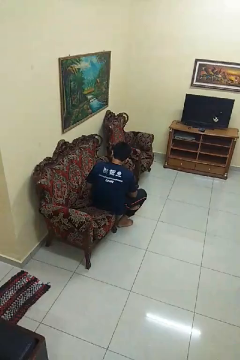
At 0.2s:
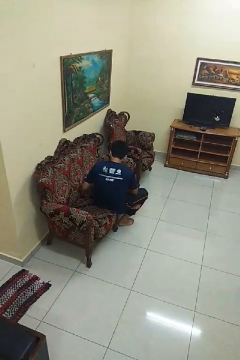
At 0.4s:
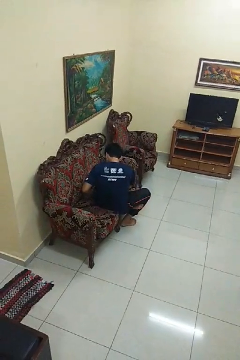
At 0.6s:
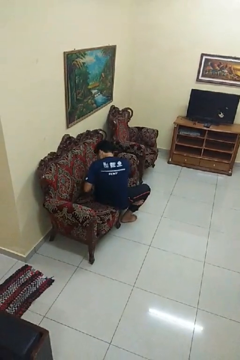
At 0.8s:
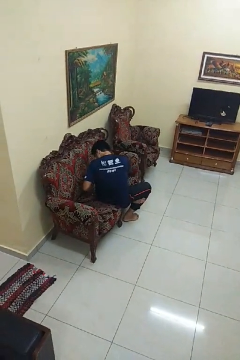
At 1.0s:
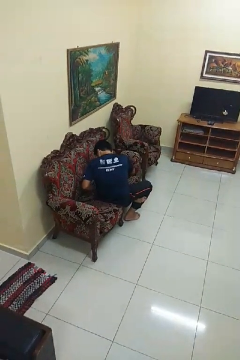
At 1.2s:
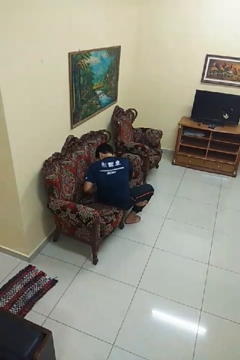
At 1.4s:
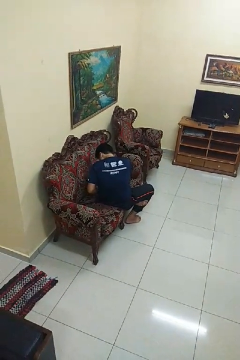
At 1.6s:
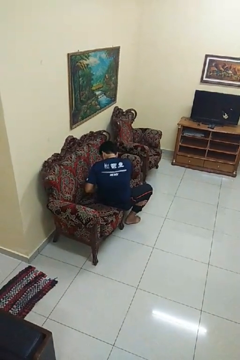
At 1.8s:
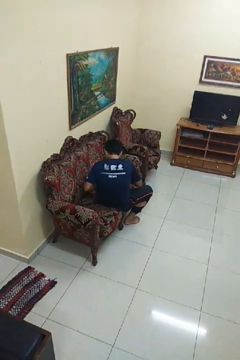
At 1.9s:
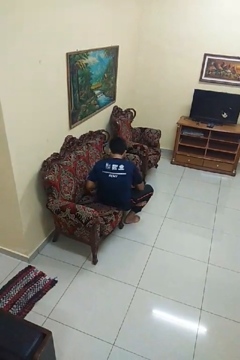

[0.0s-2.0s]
person searches in couch

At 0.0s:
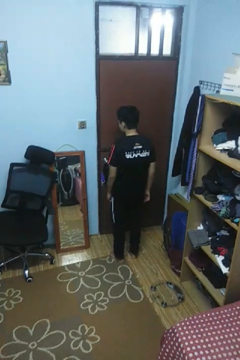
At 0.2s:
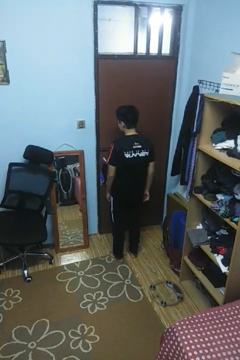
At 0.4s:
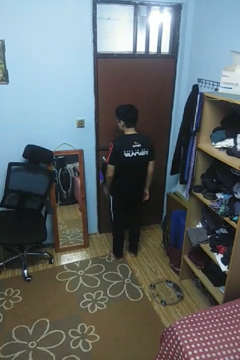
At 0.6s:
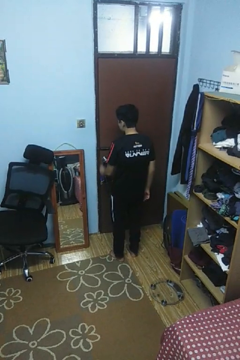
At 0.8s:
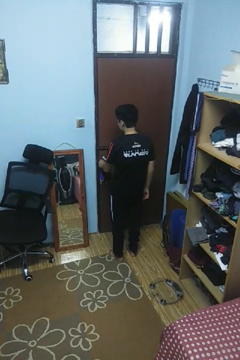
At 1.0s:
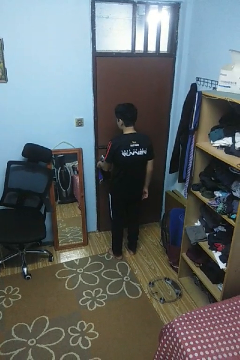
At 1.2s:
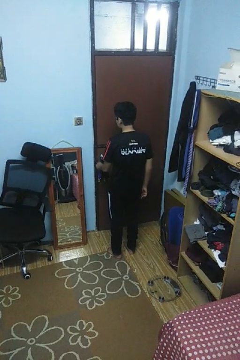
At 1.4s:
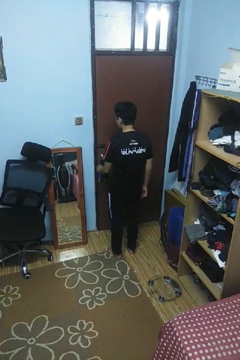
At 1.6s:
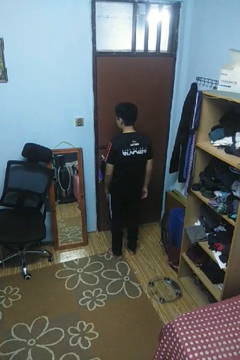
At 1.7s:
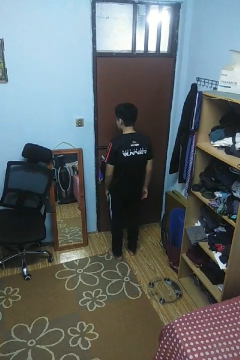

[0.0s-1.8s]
person unlocks door with keys

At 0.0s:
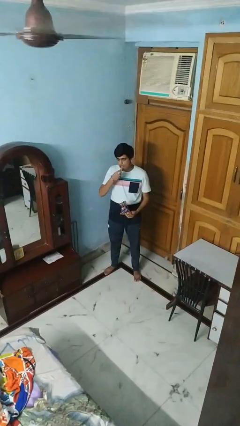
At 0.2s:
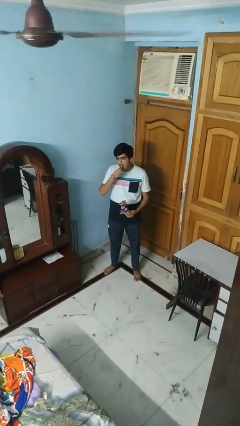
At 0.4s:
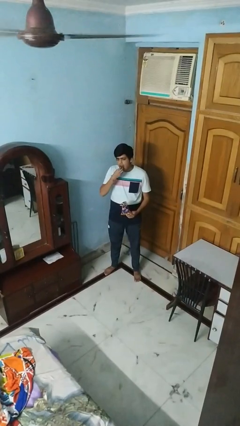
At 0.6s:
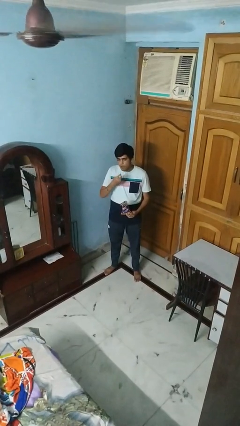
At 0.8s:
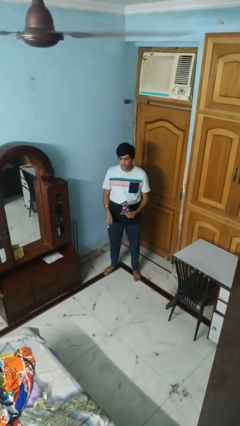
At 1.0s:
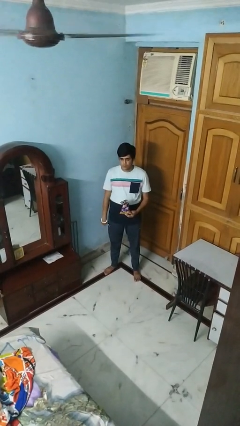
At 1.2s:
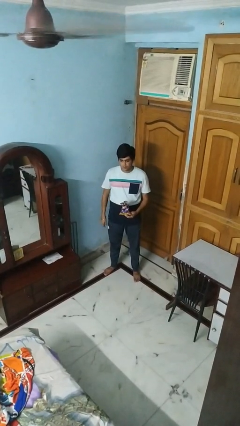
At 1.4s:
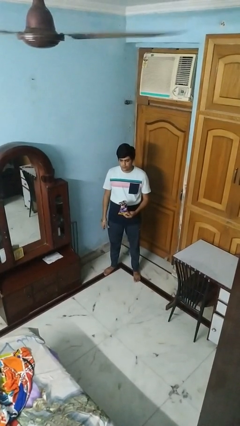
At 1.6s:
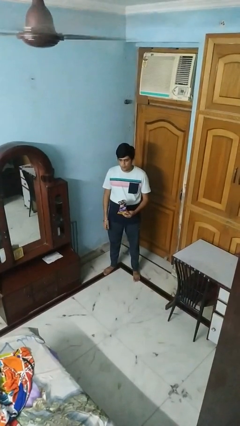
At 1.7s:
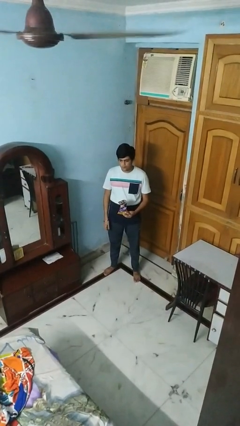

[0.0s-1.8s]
person eats snack from bag

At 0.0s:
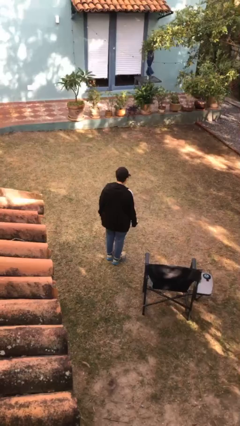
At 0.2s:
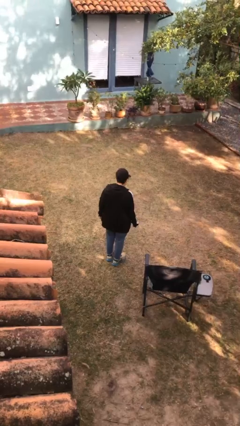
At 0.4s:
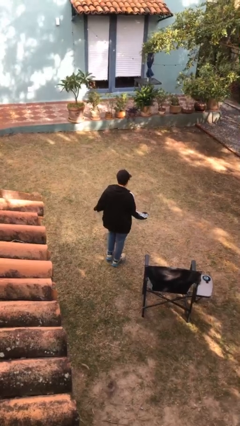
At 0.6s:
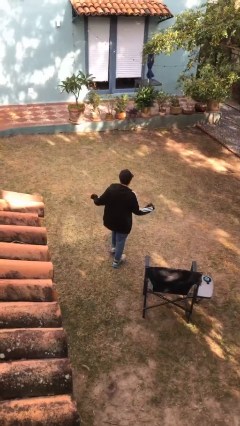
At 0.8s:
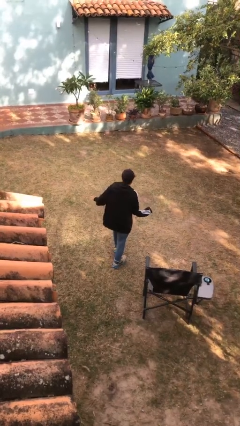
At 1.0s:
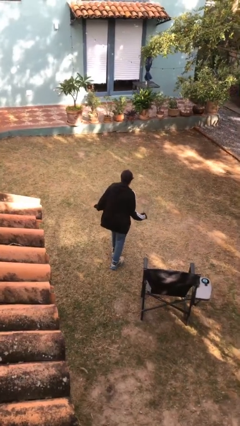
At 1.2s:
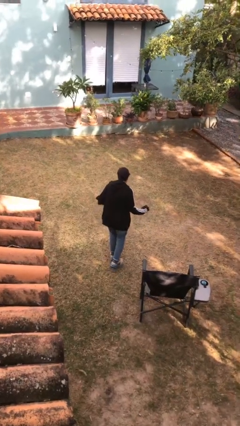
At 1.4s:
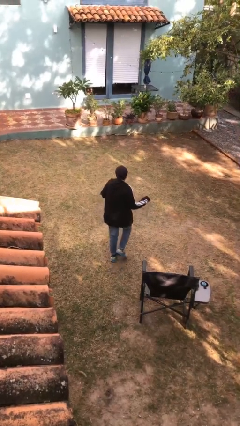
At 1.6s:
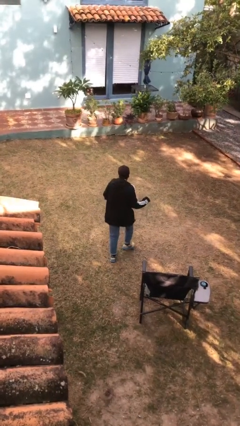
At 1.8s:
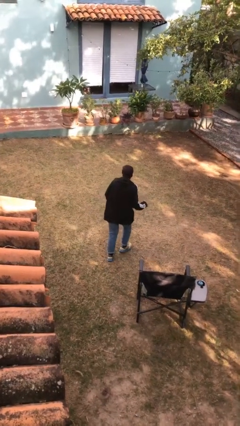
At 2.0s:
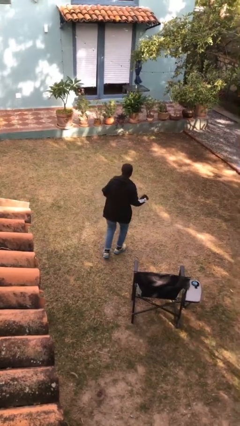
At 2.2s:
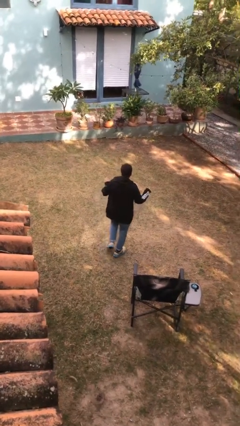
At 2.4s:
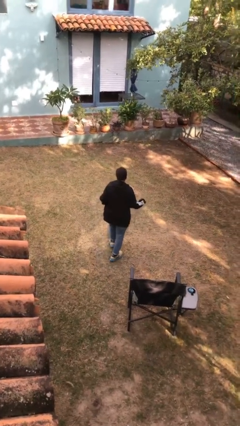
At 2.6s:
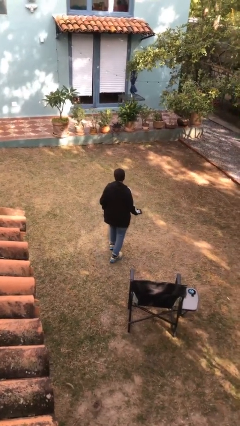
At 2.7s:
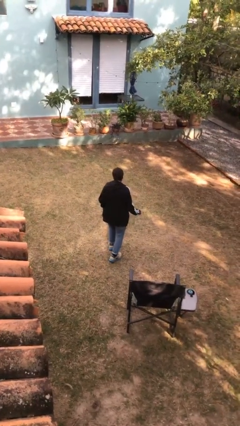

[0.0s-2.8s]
person walks tiptoe

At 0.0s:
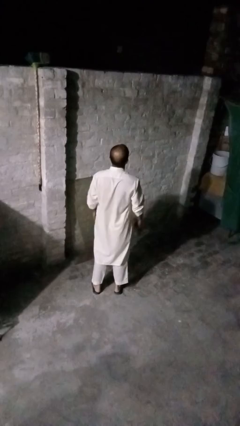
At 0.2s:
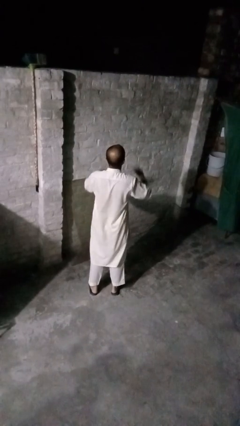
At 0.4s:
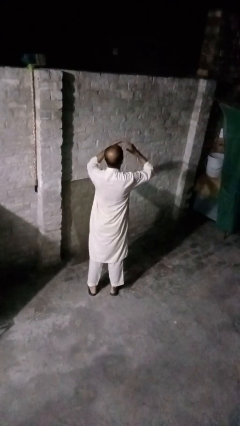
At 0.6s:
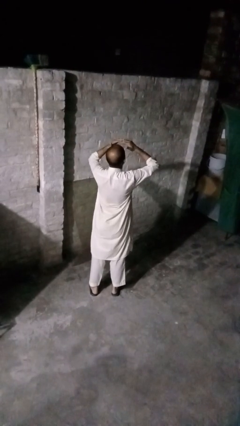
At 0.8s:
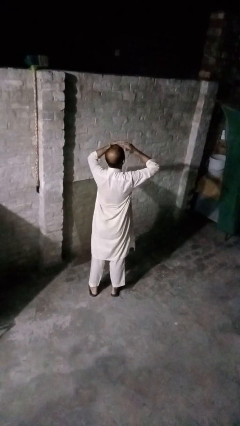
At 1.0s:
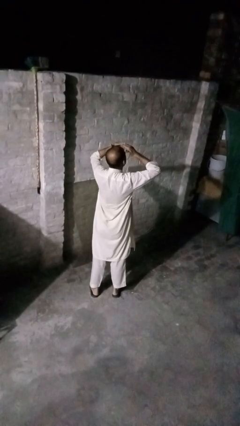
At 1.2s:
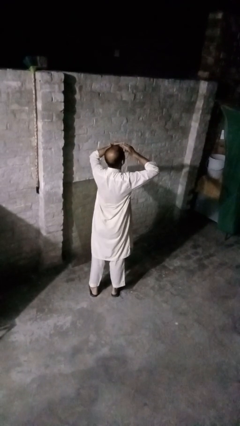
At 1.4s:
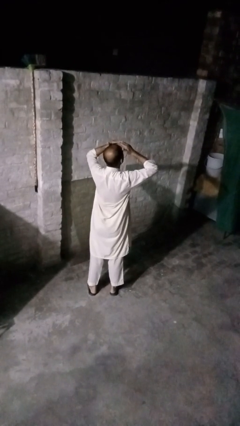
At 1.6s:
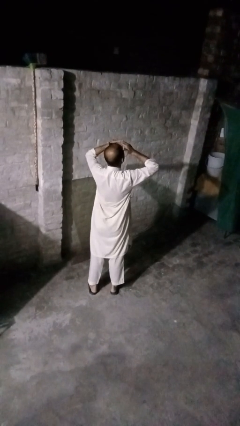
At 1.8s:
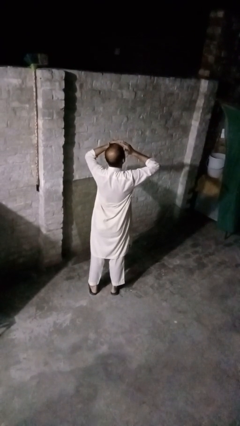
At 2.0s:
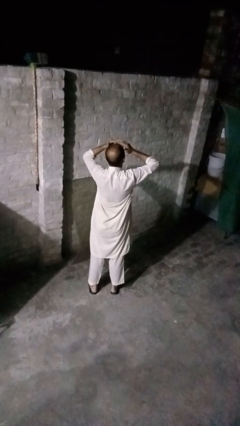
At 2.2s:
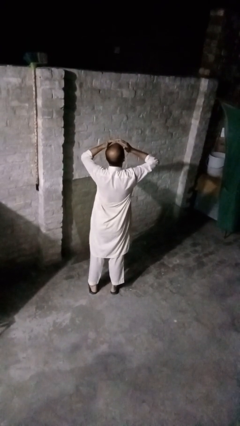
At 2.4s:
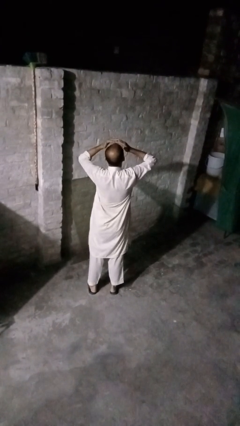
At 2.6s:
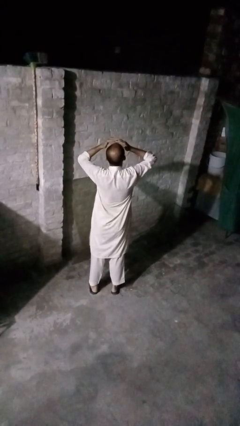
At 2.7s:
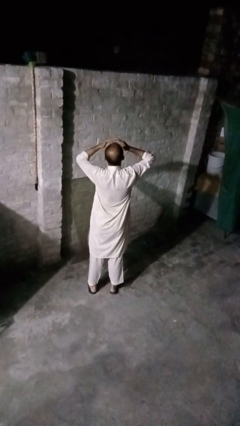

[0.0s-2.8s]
person shades eyes

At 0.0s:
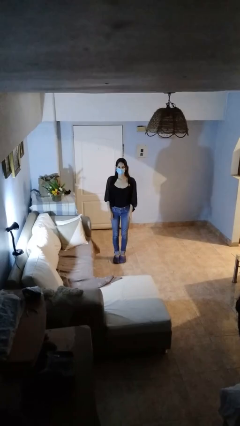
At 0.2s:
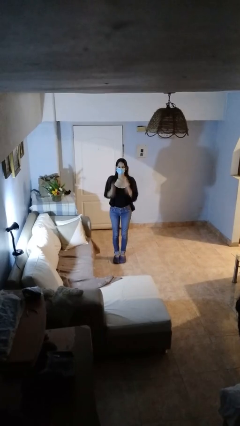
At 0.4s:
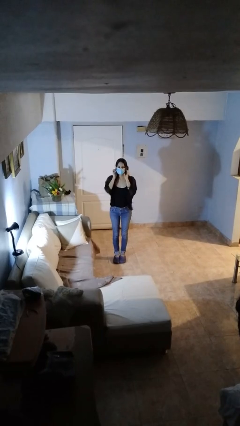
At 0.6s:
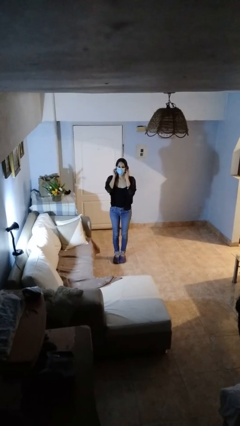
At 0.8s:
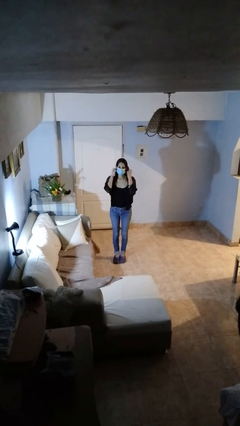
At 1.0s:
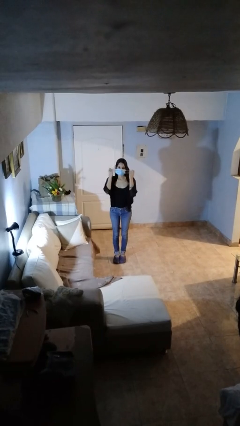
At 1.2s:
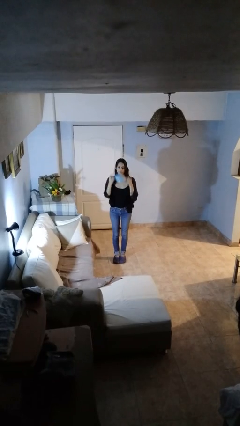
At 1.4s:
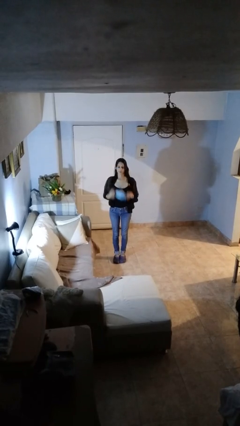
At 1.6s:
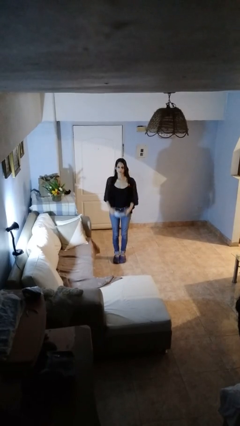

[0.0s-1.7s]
person takes off facemask

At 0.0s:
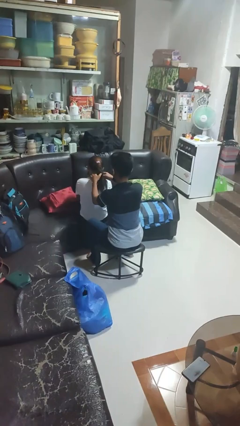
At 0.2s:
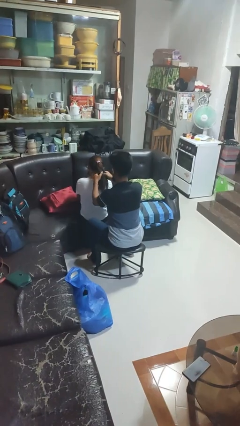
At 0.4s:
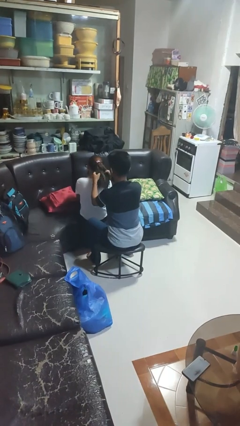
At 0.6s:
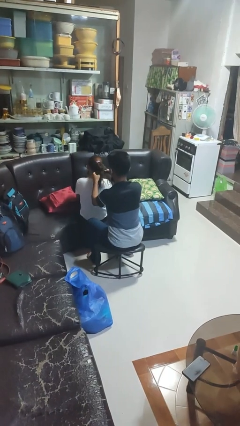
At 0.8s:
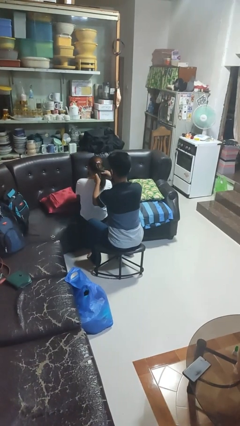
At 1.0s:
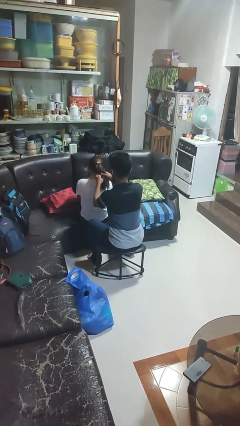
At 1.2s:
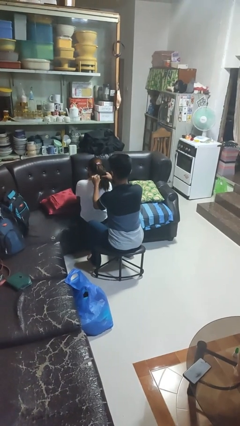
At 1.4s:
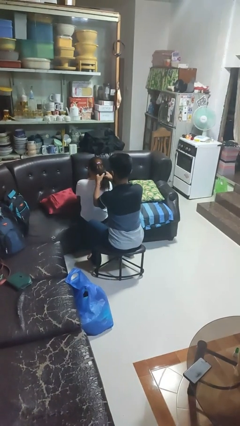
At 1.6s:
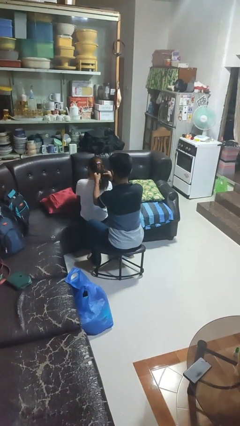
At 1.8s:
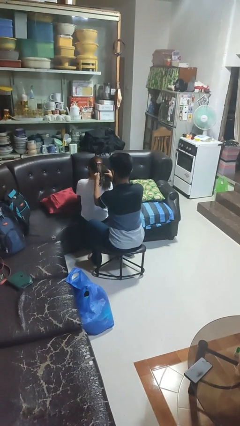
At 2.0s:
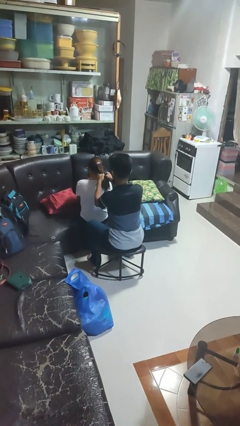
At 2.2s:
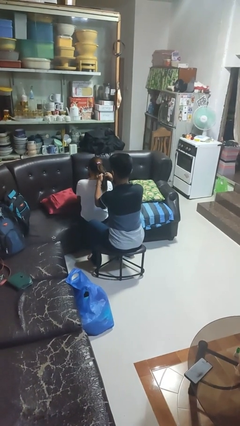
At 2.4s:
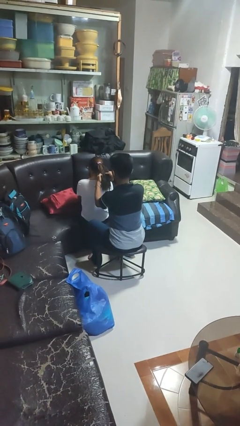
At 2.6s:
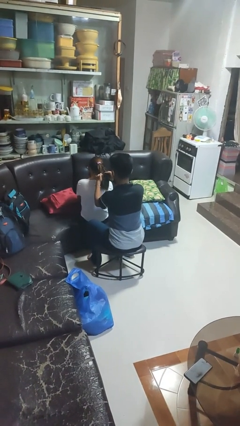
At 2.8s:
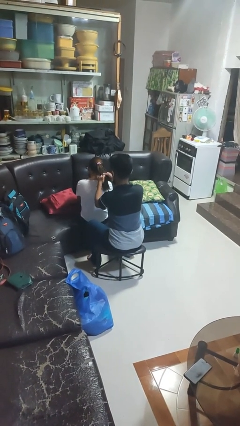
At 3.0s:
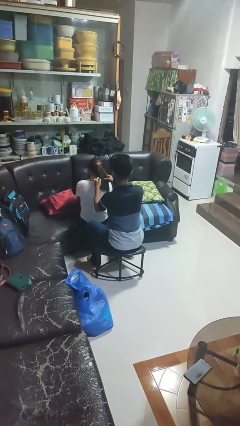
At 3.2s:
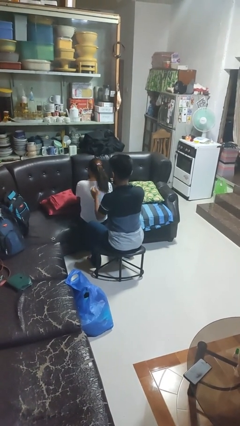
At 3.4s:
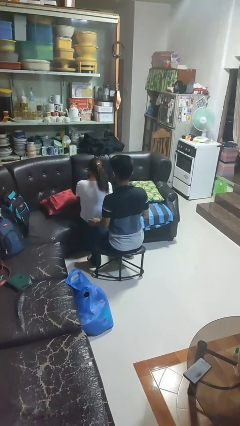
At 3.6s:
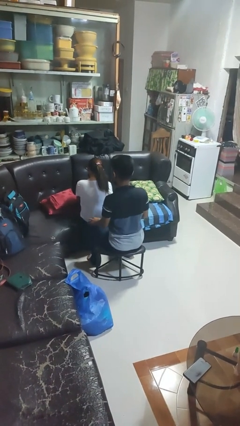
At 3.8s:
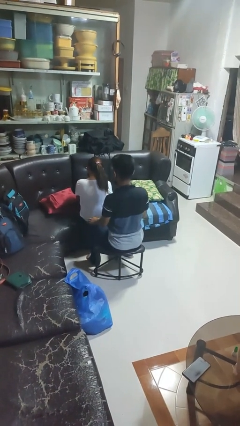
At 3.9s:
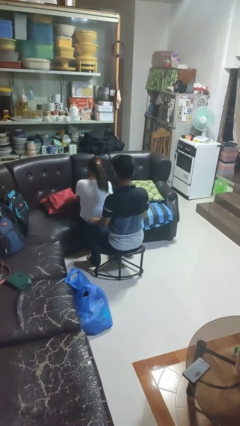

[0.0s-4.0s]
person braids hair of person

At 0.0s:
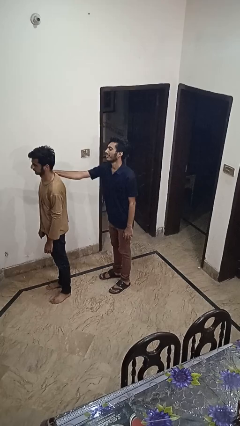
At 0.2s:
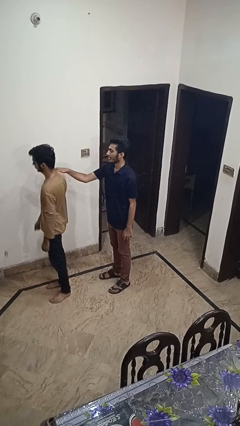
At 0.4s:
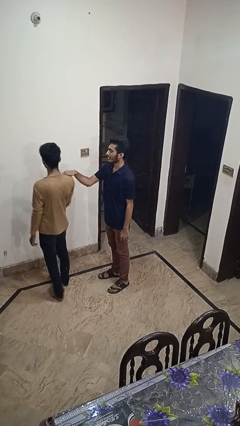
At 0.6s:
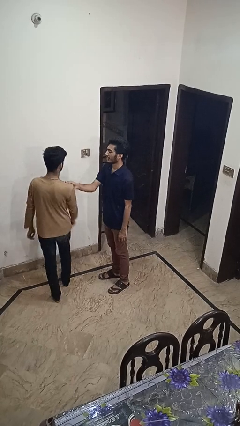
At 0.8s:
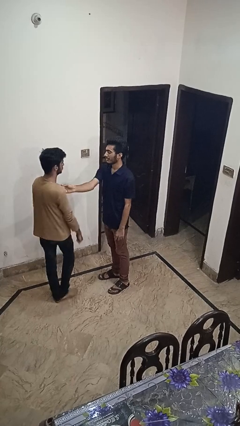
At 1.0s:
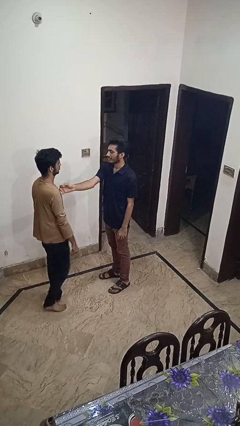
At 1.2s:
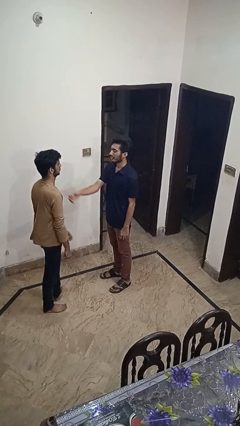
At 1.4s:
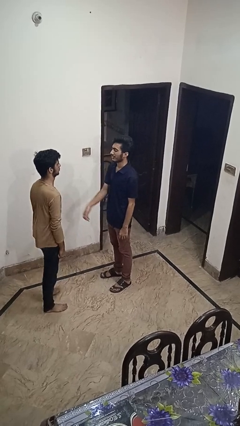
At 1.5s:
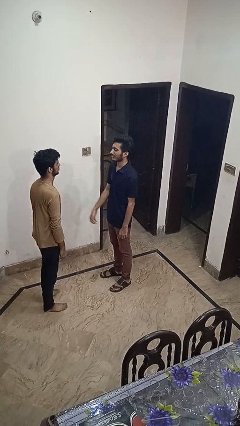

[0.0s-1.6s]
person spins person around
